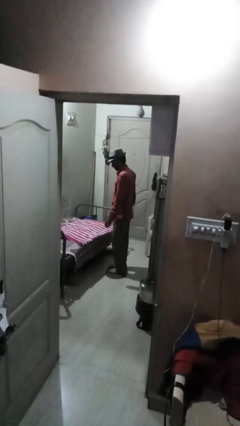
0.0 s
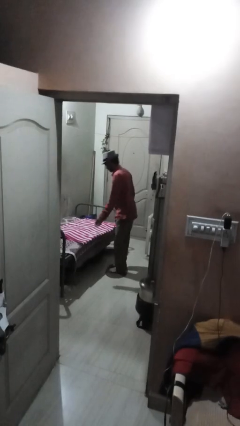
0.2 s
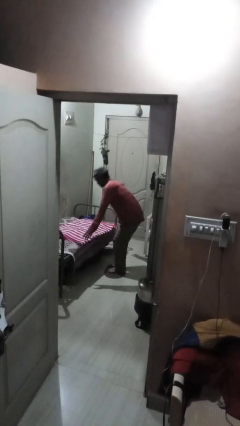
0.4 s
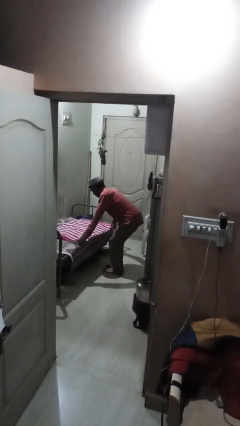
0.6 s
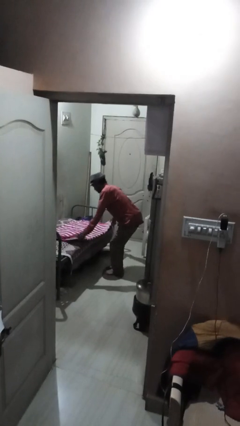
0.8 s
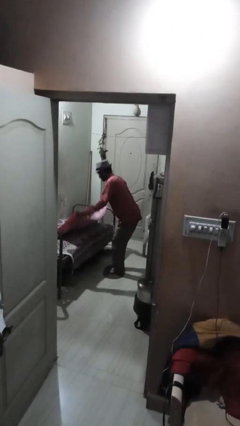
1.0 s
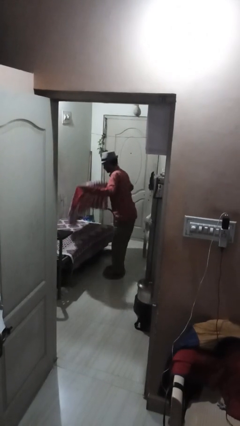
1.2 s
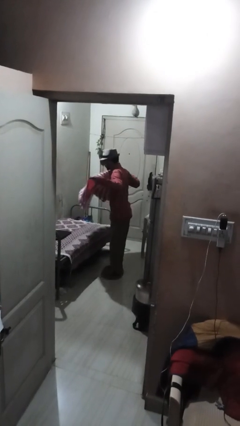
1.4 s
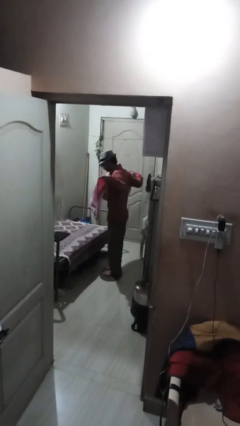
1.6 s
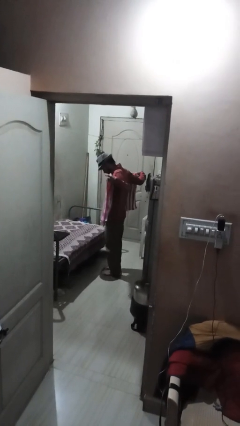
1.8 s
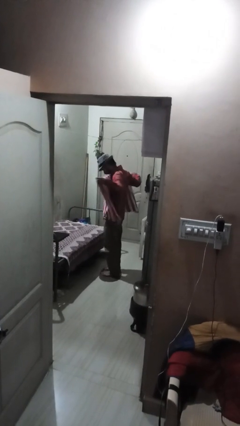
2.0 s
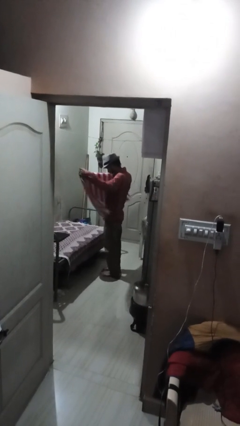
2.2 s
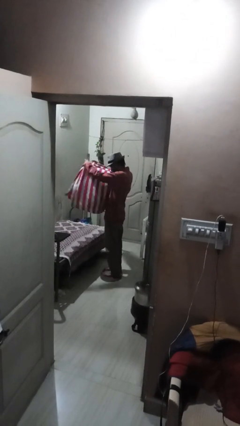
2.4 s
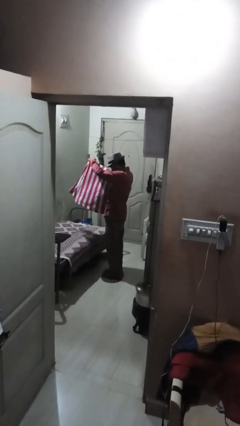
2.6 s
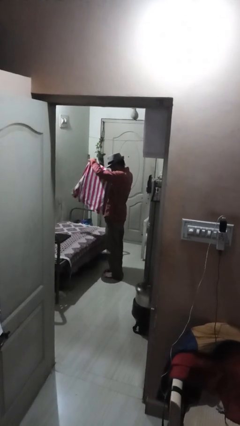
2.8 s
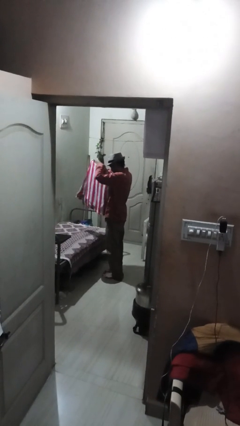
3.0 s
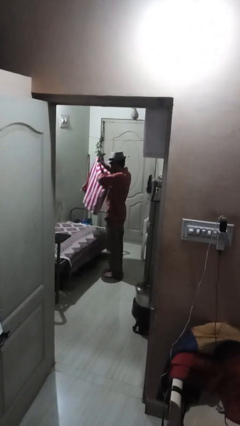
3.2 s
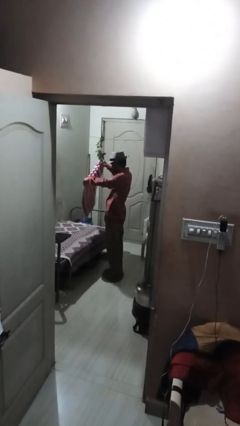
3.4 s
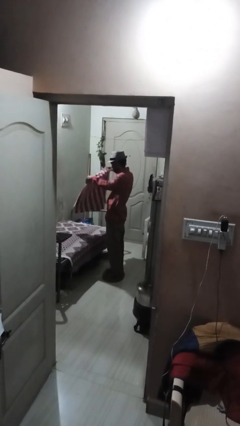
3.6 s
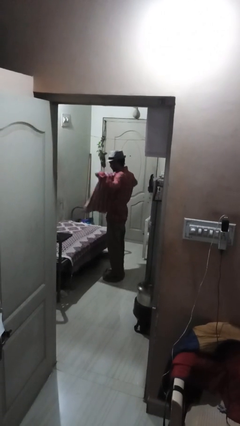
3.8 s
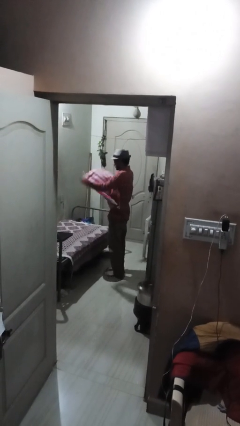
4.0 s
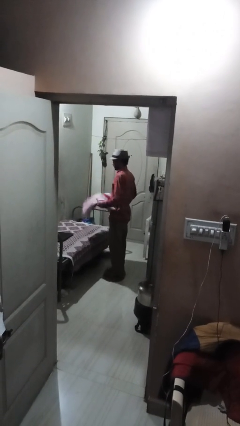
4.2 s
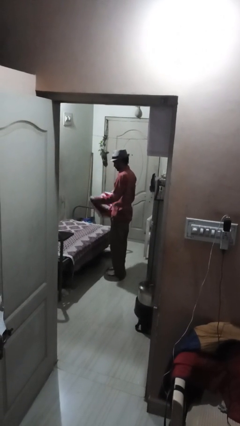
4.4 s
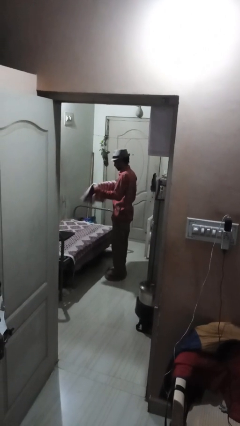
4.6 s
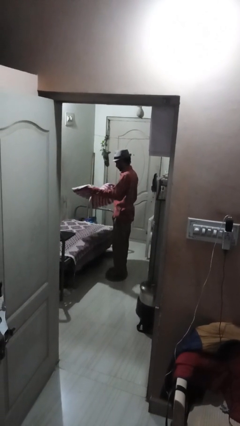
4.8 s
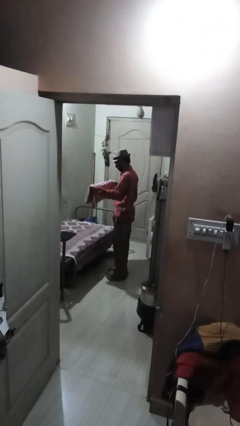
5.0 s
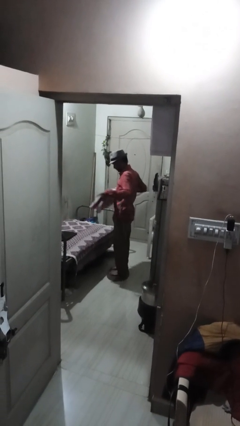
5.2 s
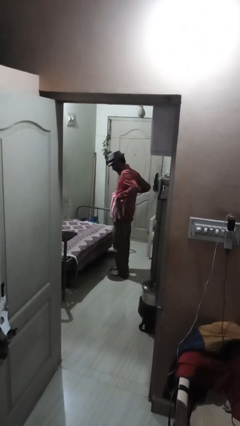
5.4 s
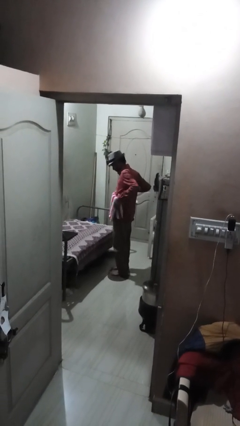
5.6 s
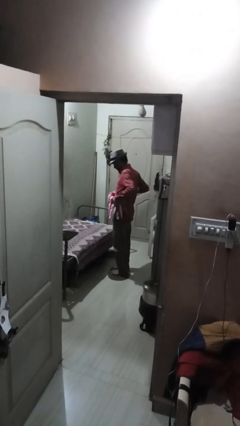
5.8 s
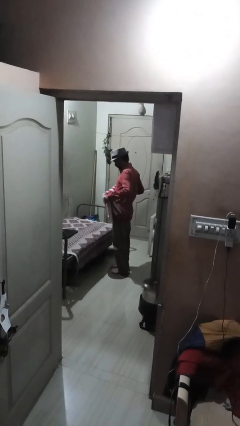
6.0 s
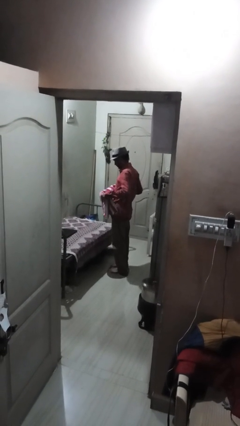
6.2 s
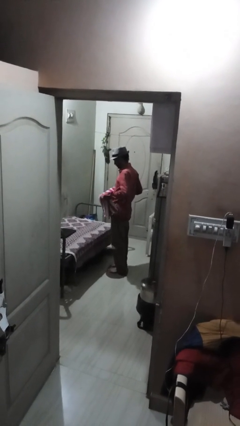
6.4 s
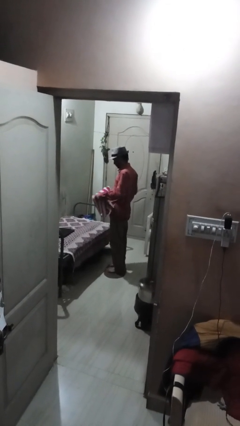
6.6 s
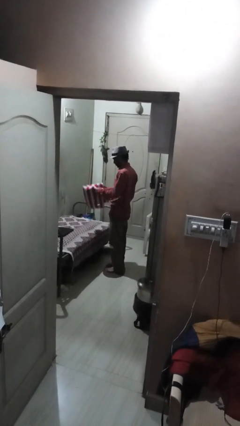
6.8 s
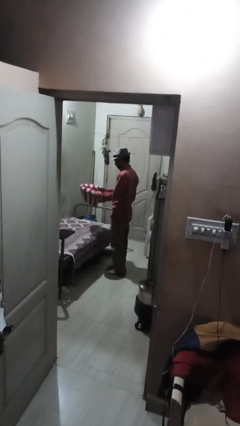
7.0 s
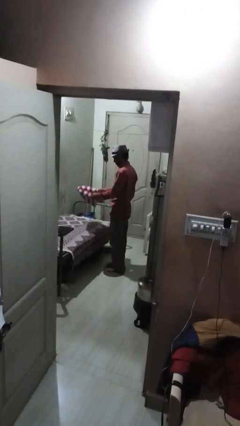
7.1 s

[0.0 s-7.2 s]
person folds blanket

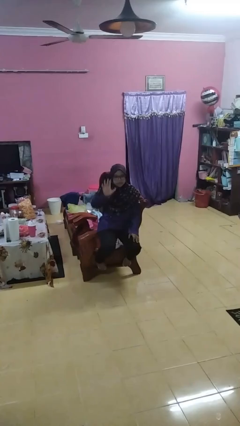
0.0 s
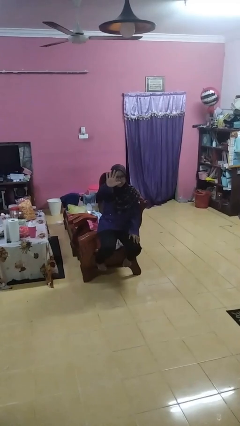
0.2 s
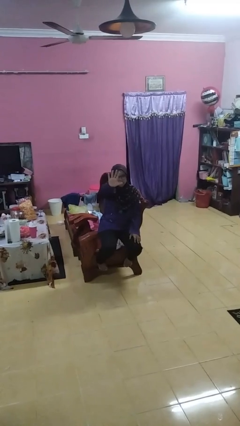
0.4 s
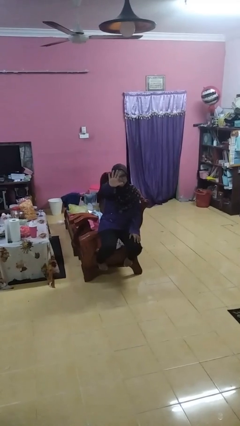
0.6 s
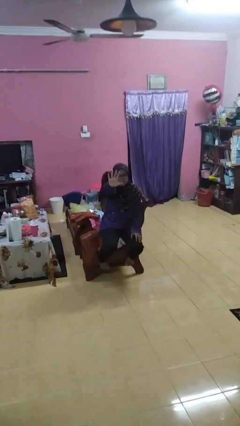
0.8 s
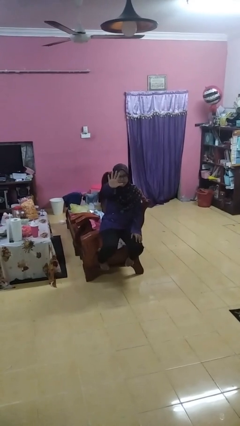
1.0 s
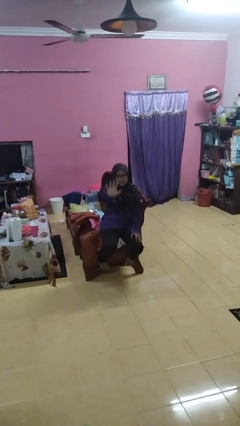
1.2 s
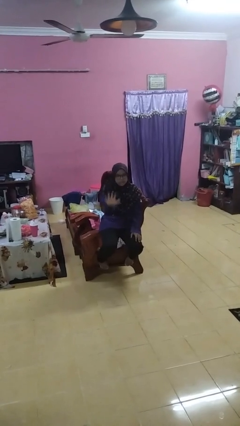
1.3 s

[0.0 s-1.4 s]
person gestures number five

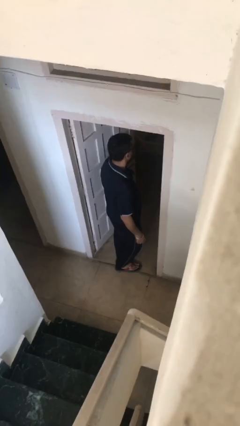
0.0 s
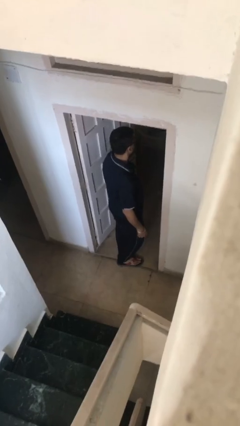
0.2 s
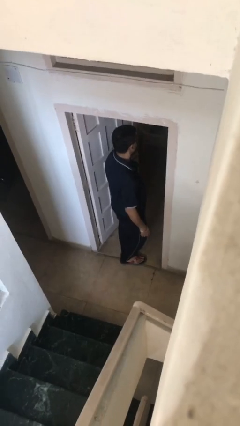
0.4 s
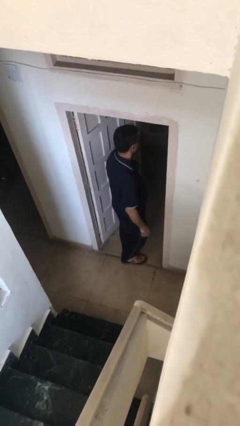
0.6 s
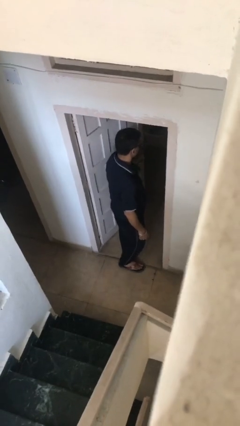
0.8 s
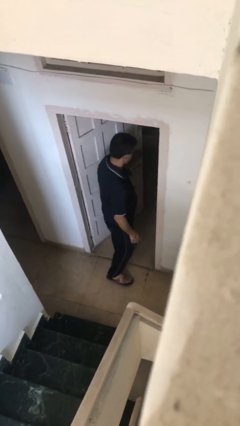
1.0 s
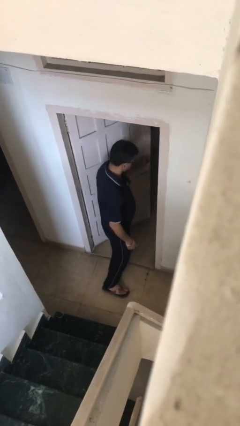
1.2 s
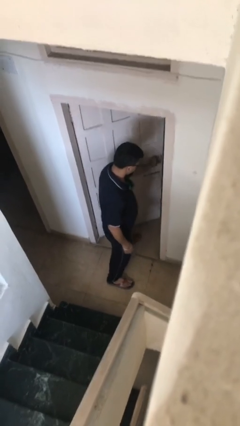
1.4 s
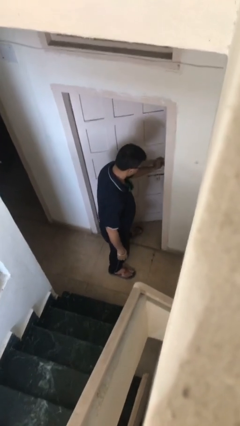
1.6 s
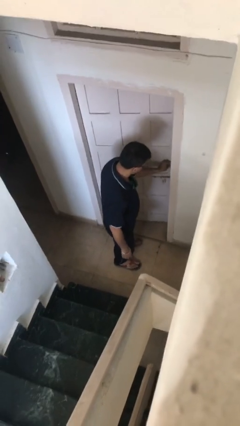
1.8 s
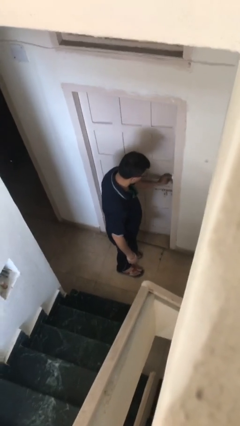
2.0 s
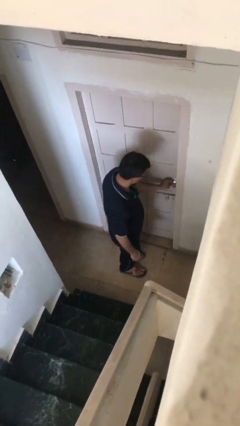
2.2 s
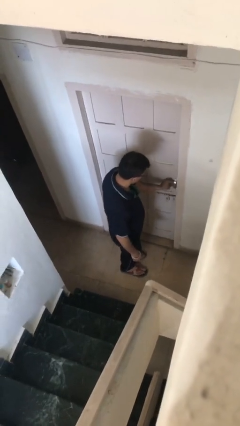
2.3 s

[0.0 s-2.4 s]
person closes facility door

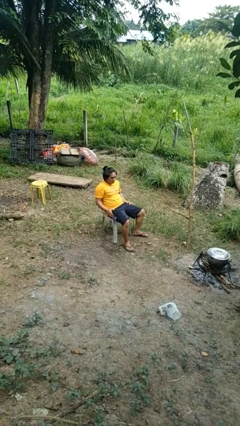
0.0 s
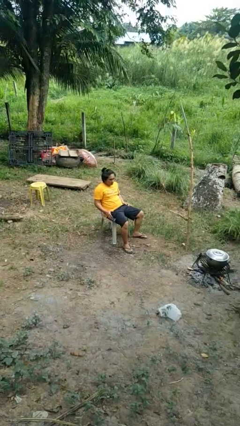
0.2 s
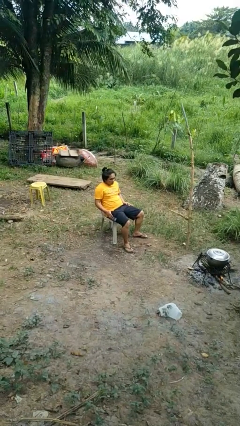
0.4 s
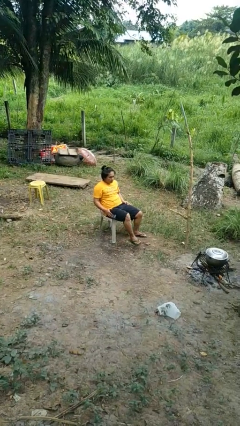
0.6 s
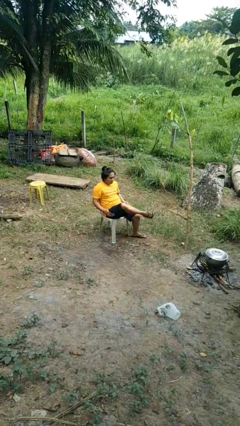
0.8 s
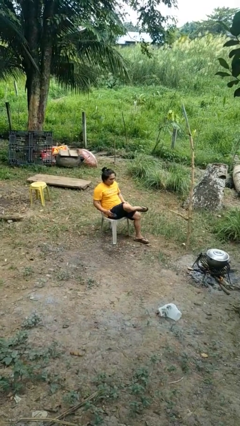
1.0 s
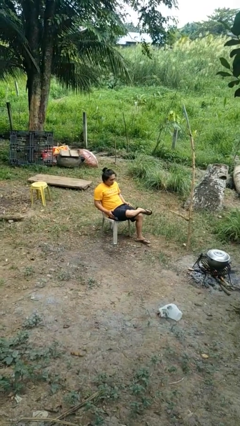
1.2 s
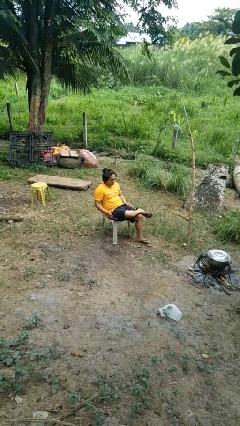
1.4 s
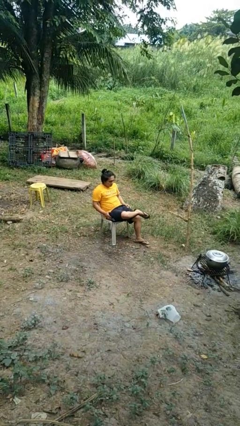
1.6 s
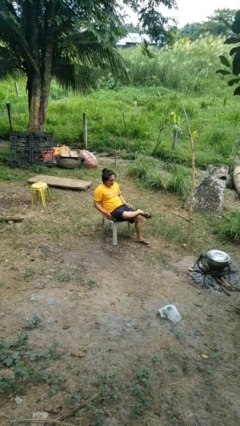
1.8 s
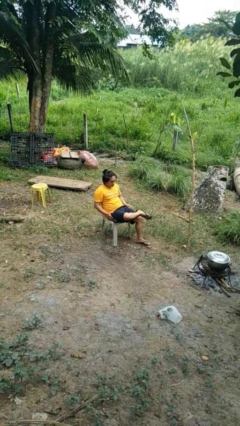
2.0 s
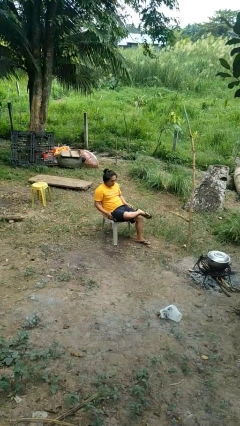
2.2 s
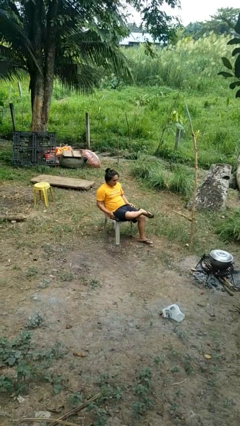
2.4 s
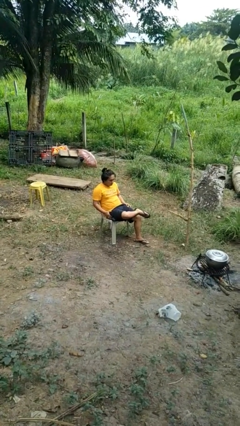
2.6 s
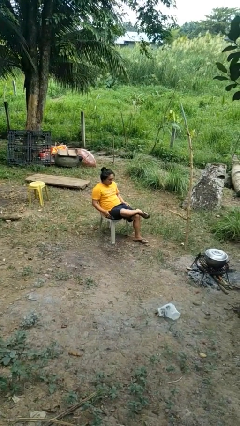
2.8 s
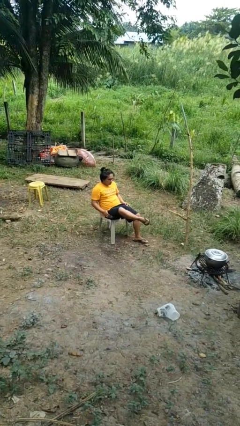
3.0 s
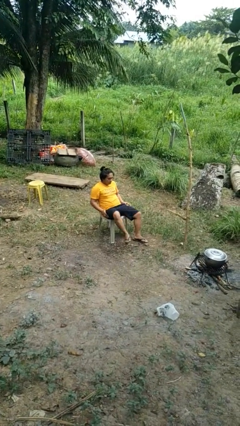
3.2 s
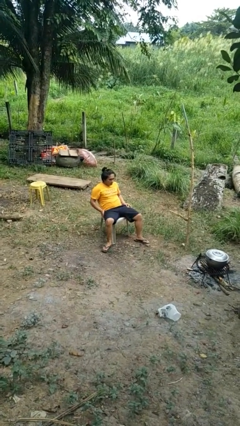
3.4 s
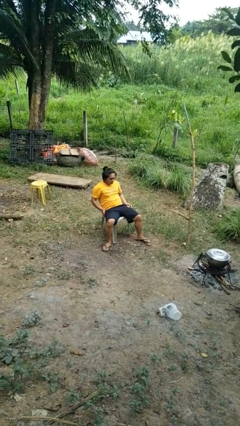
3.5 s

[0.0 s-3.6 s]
person crosses legs

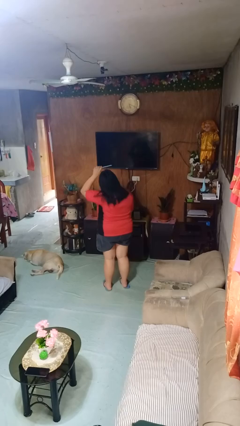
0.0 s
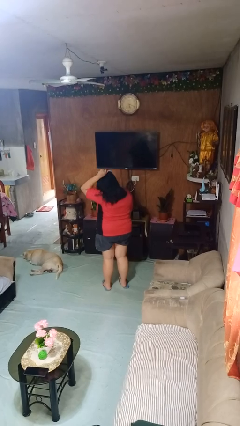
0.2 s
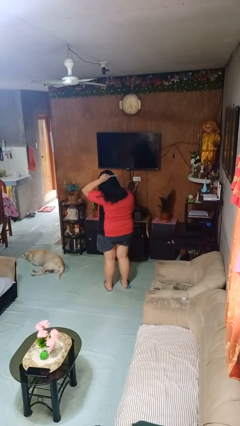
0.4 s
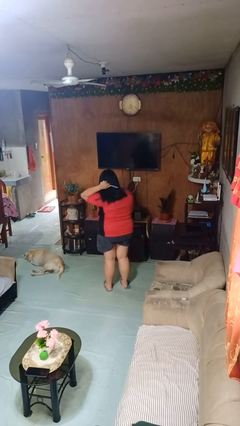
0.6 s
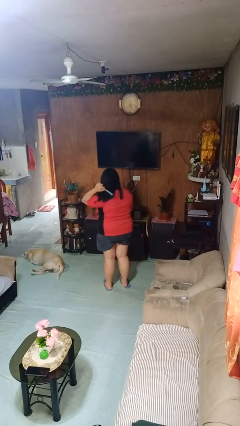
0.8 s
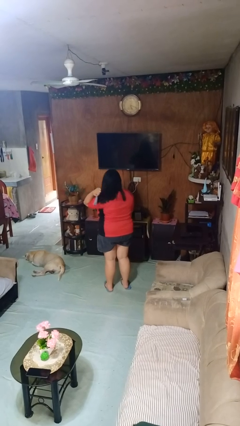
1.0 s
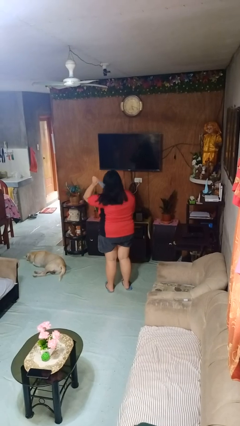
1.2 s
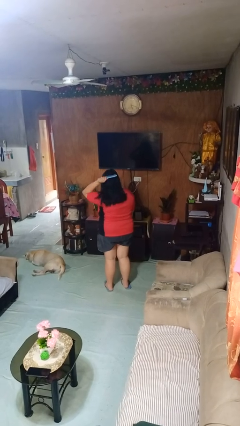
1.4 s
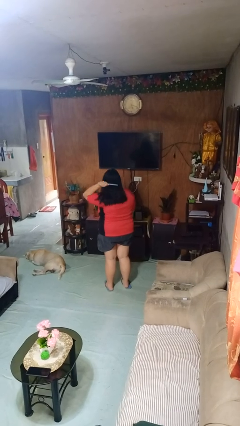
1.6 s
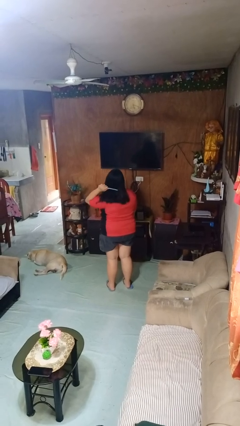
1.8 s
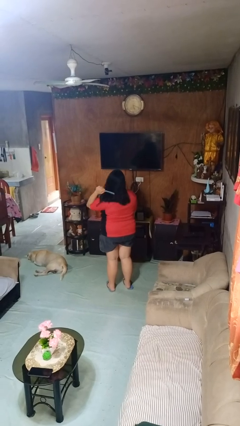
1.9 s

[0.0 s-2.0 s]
person brushes hair

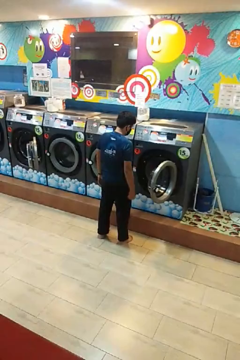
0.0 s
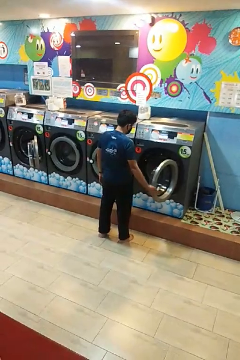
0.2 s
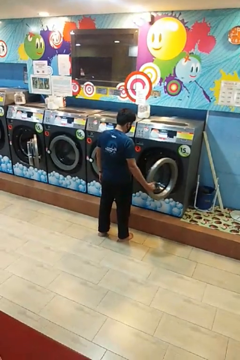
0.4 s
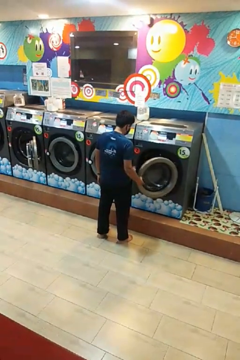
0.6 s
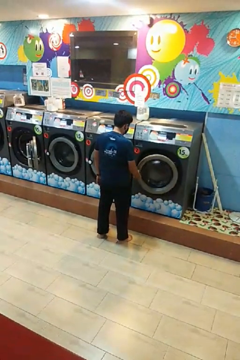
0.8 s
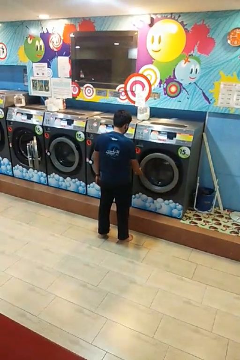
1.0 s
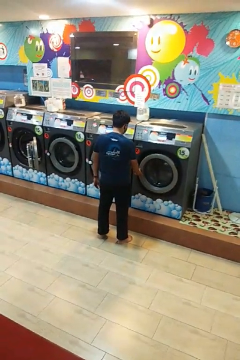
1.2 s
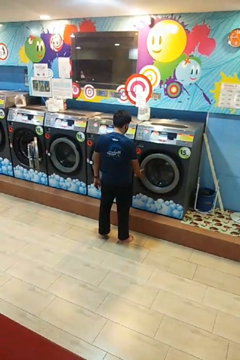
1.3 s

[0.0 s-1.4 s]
person closes clothes washer
